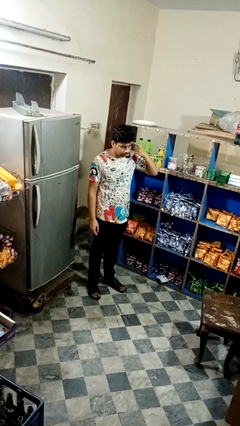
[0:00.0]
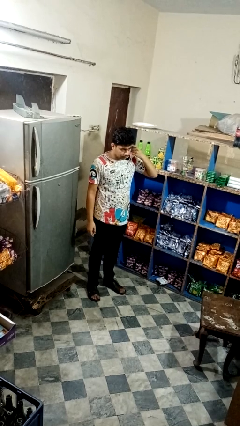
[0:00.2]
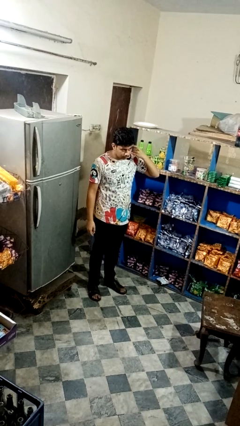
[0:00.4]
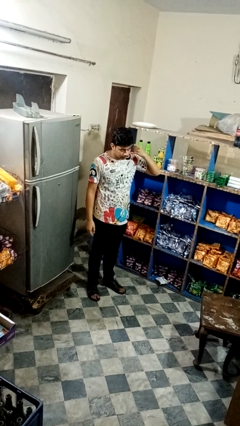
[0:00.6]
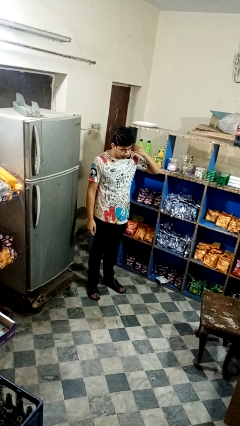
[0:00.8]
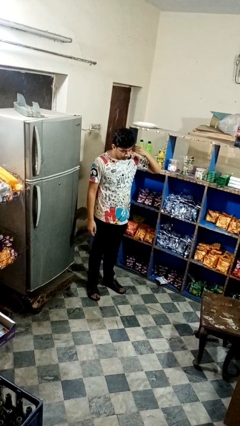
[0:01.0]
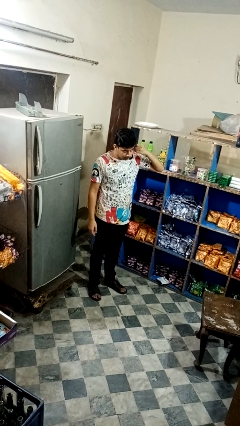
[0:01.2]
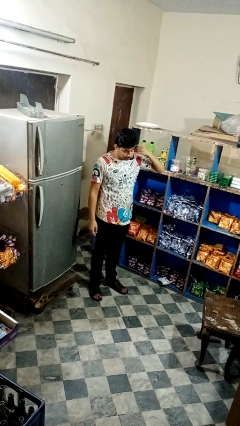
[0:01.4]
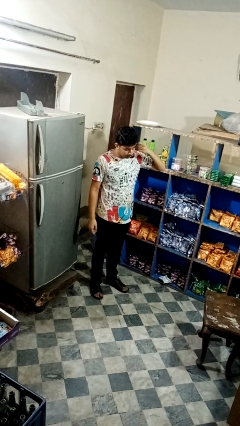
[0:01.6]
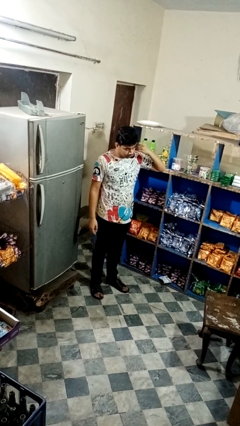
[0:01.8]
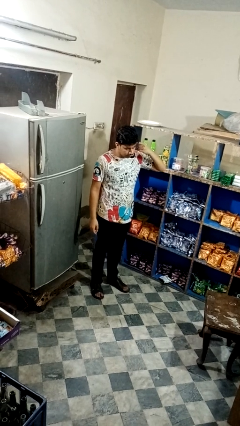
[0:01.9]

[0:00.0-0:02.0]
person gestures listen closely

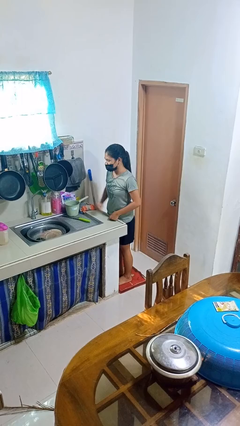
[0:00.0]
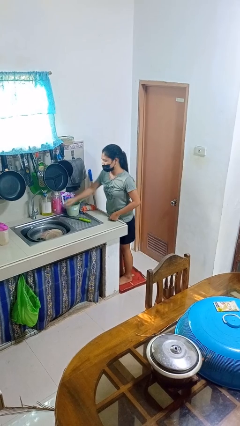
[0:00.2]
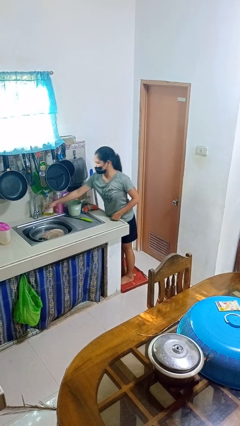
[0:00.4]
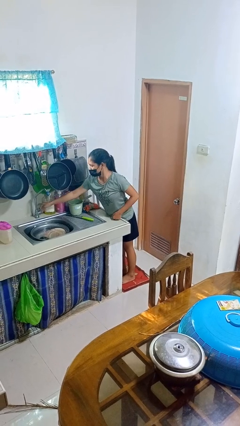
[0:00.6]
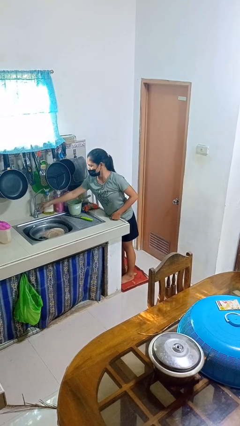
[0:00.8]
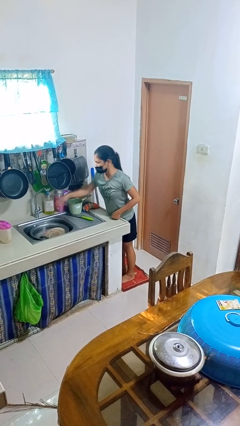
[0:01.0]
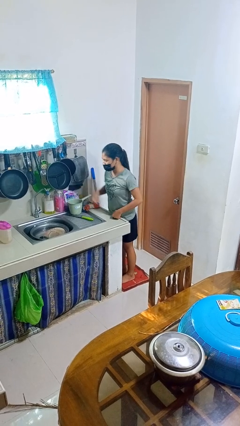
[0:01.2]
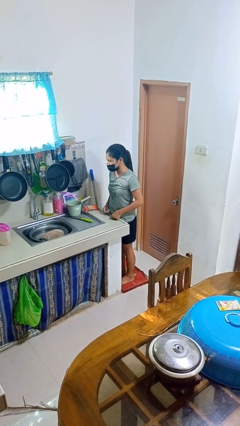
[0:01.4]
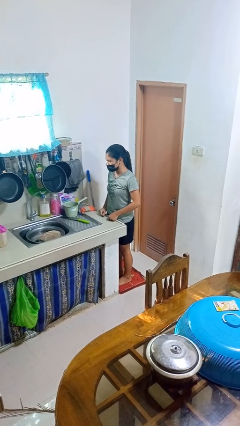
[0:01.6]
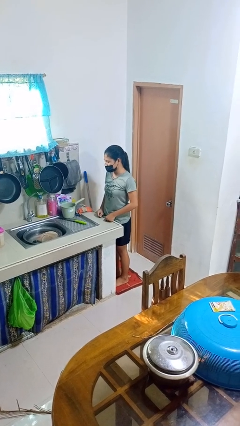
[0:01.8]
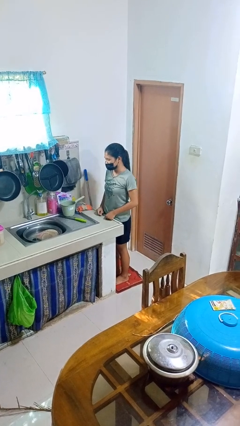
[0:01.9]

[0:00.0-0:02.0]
person turns off faucet

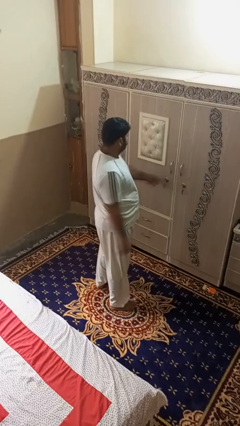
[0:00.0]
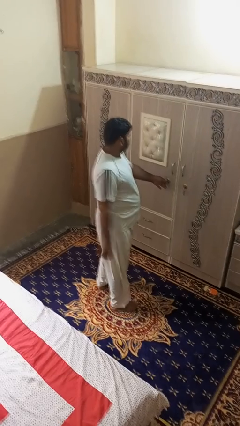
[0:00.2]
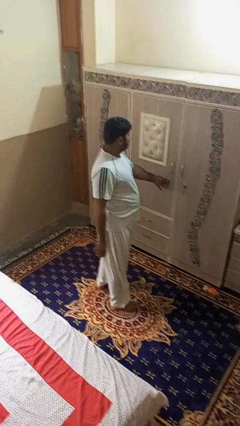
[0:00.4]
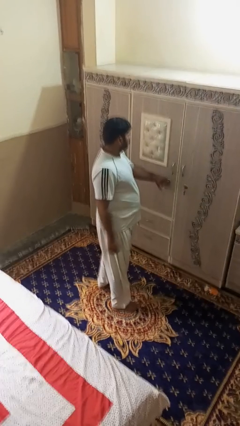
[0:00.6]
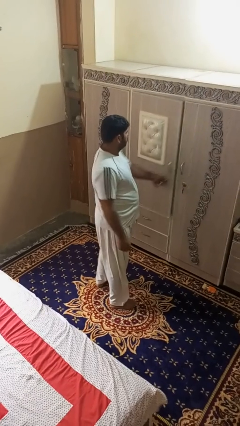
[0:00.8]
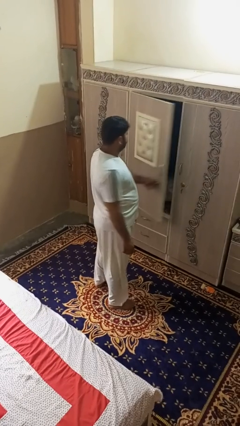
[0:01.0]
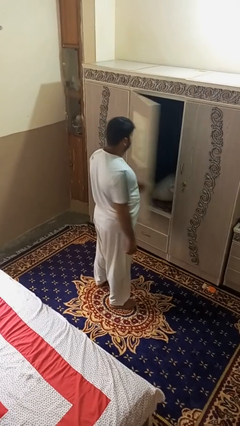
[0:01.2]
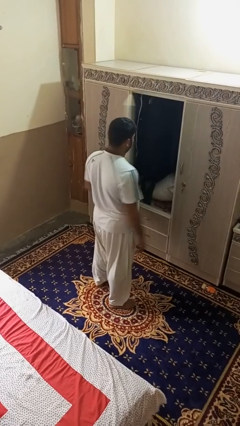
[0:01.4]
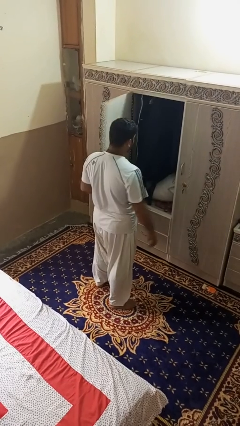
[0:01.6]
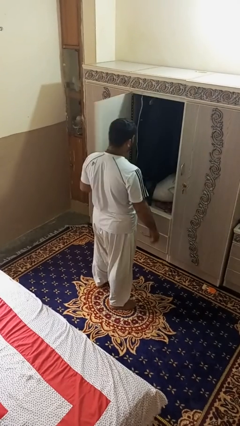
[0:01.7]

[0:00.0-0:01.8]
person opens dresser drawer

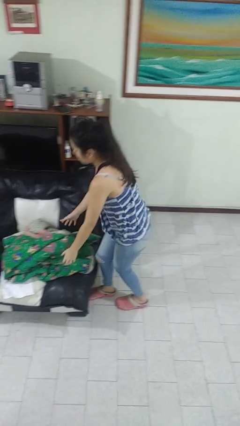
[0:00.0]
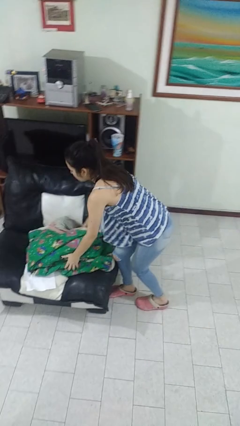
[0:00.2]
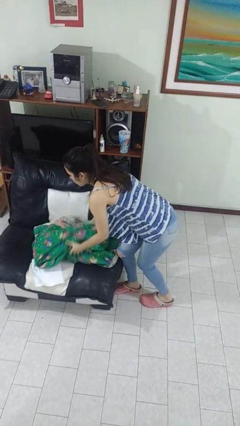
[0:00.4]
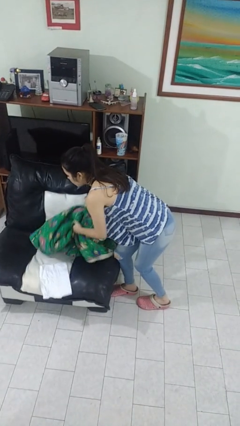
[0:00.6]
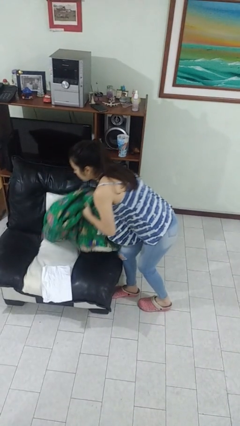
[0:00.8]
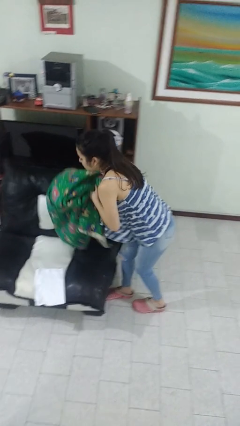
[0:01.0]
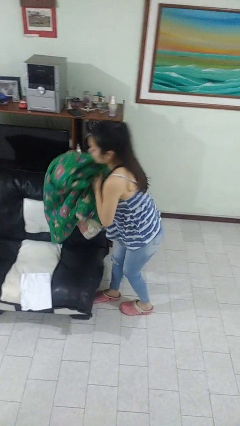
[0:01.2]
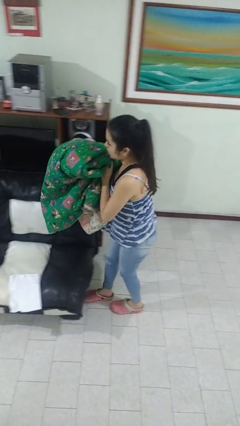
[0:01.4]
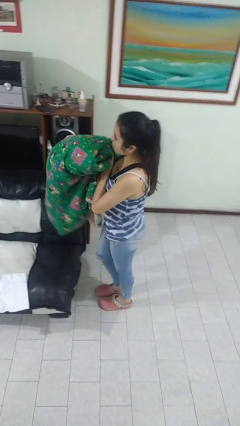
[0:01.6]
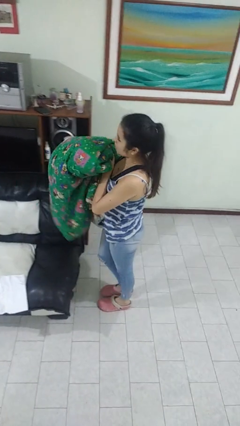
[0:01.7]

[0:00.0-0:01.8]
person picks up object from couch

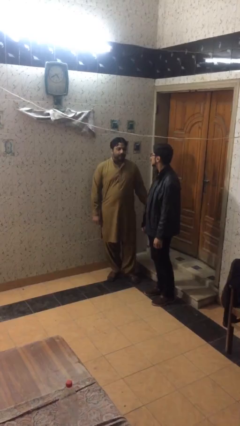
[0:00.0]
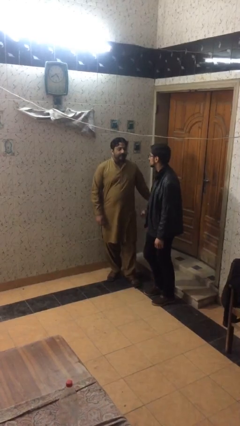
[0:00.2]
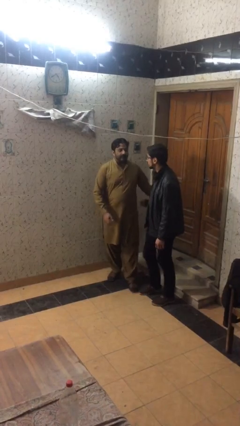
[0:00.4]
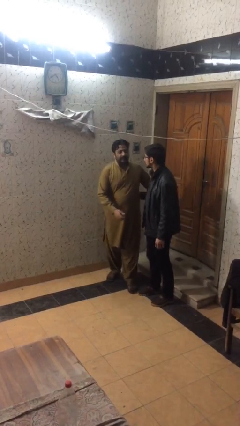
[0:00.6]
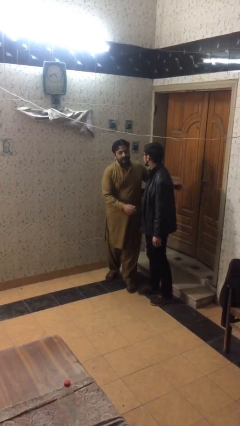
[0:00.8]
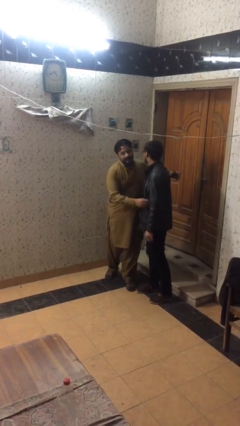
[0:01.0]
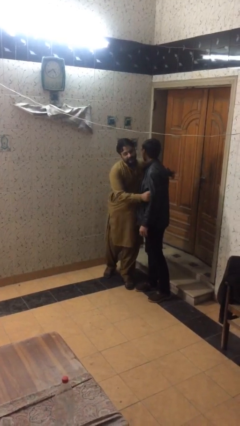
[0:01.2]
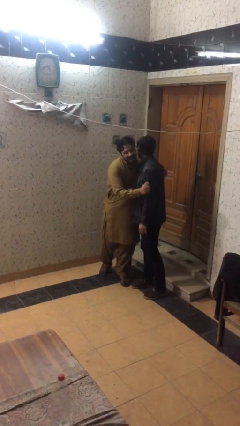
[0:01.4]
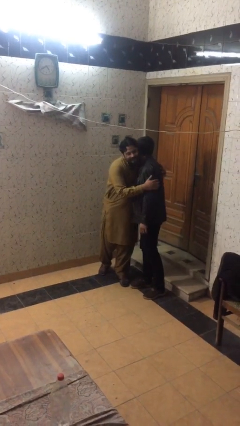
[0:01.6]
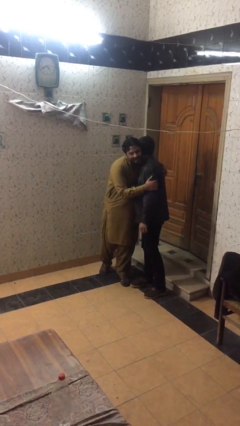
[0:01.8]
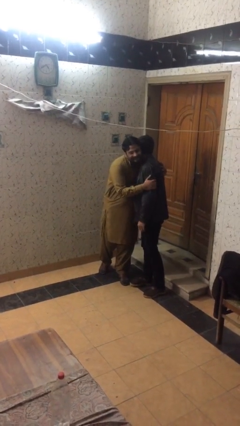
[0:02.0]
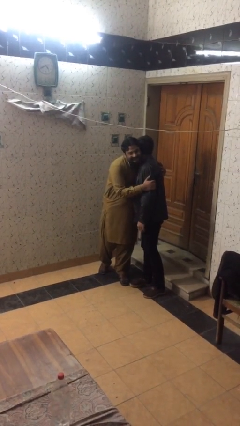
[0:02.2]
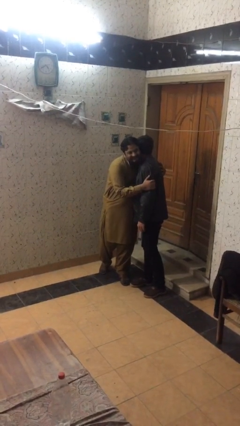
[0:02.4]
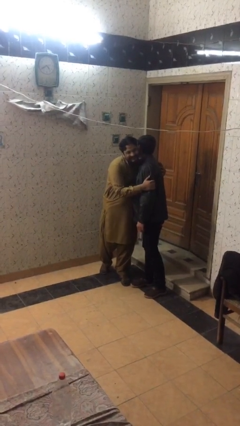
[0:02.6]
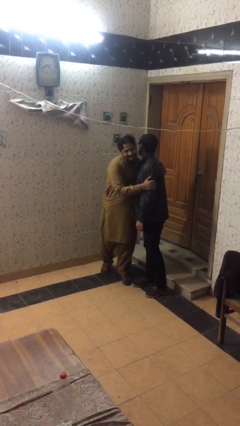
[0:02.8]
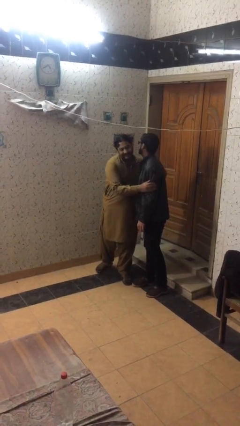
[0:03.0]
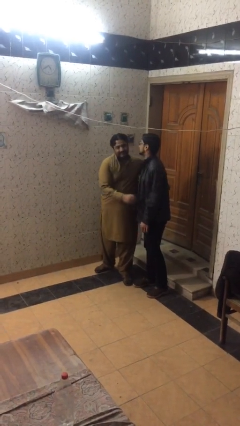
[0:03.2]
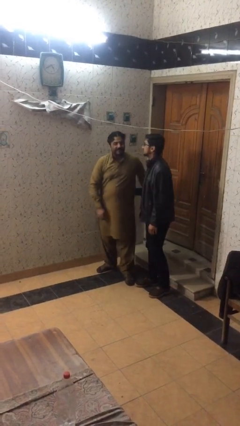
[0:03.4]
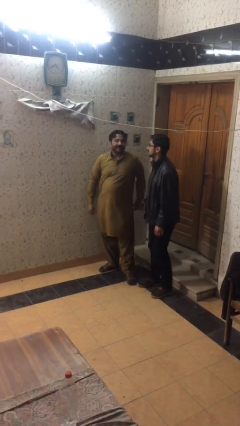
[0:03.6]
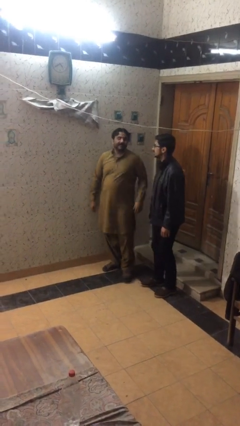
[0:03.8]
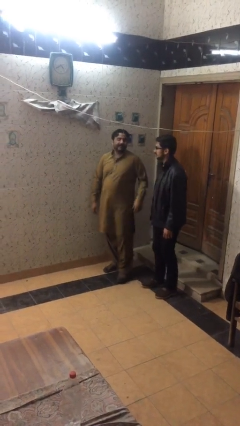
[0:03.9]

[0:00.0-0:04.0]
person embraces person

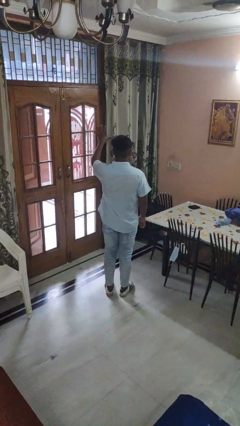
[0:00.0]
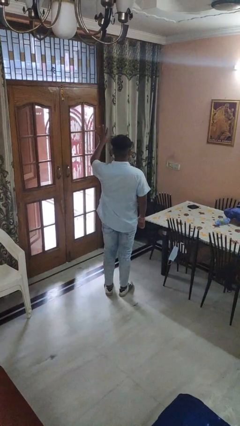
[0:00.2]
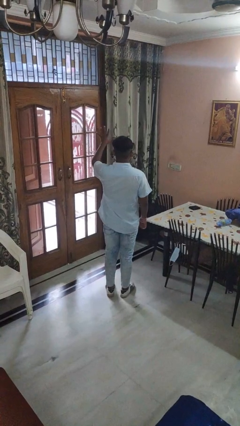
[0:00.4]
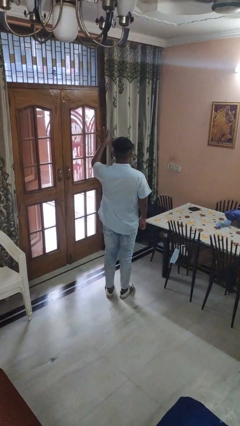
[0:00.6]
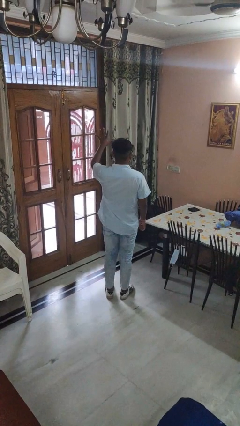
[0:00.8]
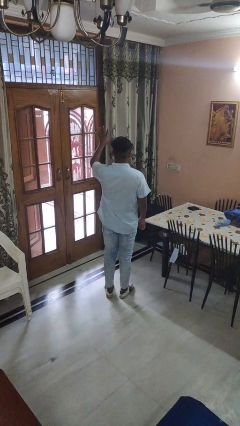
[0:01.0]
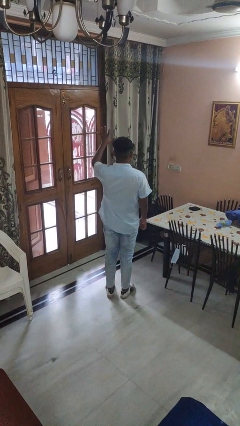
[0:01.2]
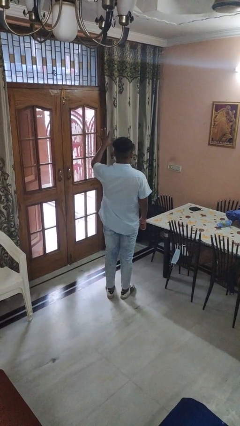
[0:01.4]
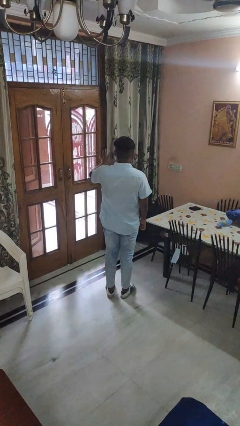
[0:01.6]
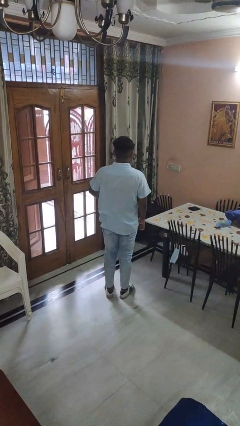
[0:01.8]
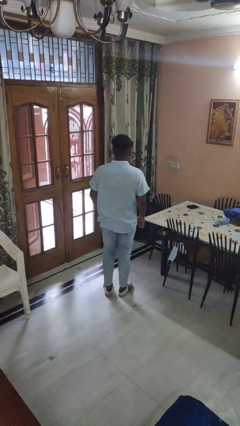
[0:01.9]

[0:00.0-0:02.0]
person gestures number five

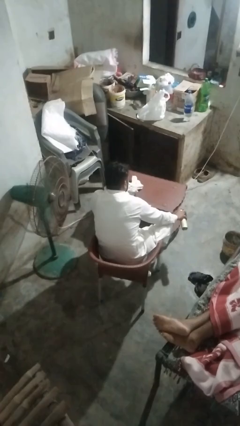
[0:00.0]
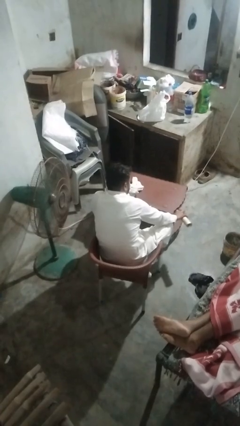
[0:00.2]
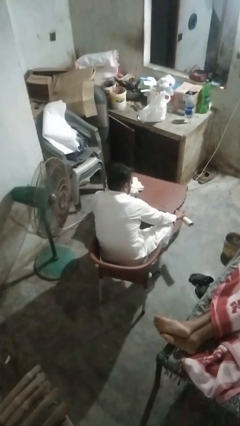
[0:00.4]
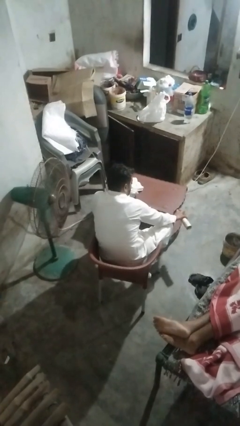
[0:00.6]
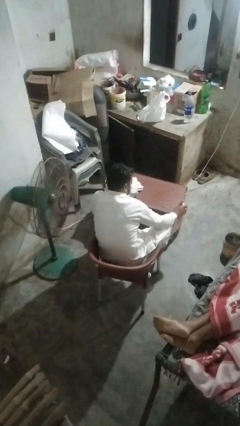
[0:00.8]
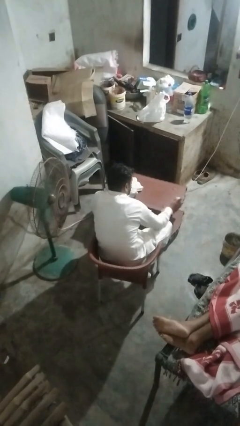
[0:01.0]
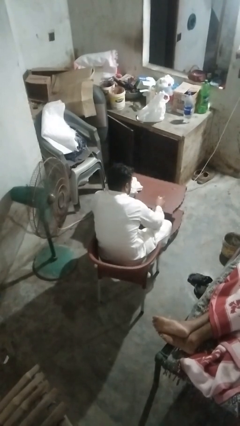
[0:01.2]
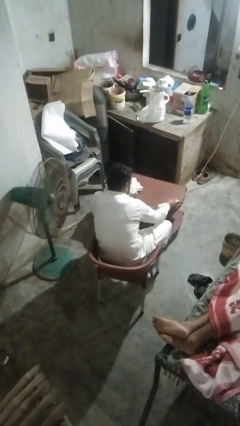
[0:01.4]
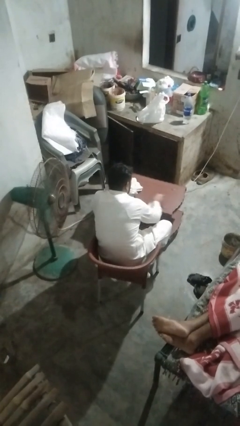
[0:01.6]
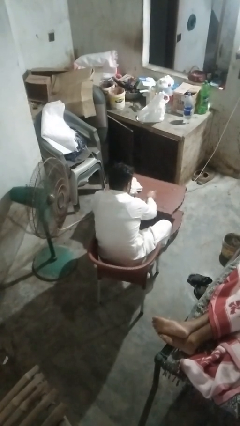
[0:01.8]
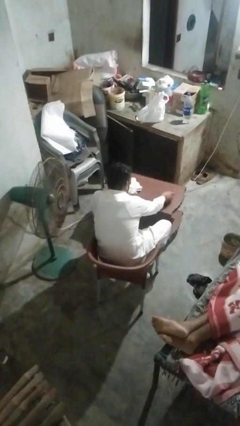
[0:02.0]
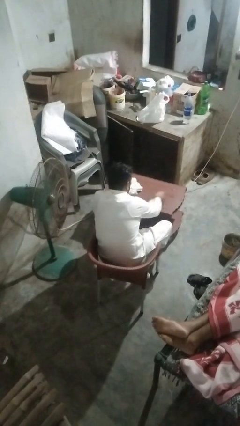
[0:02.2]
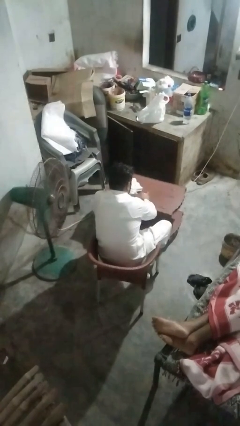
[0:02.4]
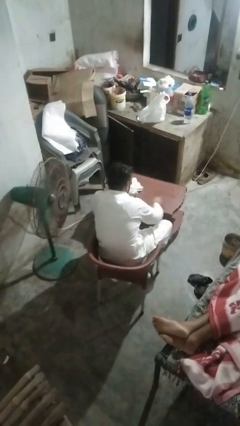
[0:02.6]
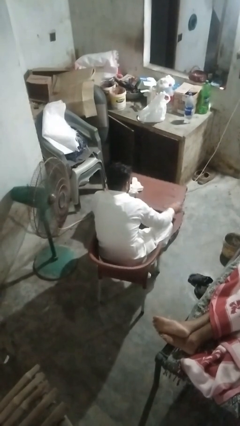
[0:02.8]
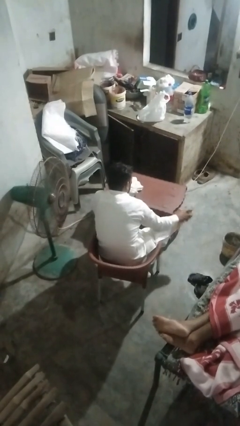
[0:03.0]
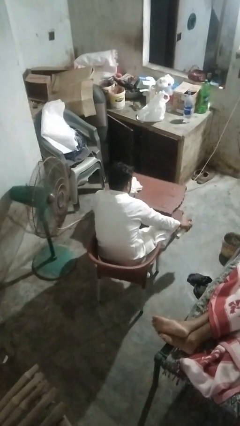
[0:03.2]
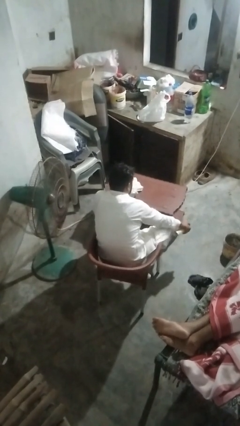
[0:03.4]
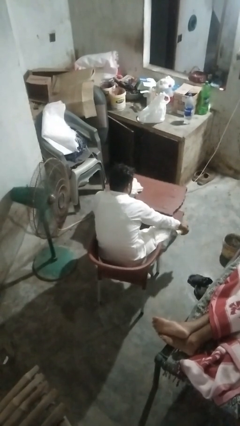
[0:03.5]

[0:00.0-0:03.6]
person sprays from bottle
